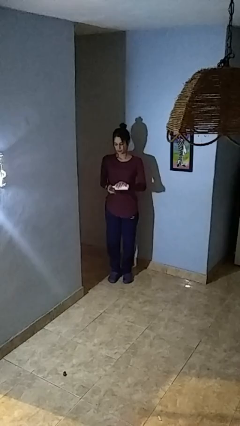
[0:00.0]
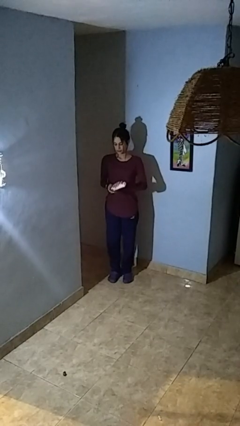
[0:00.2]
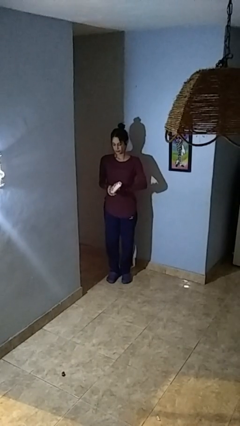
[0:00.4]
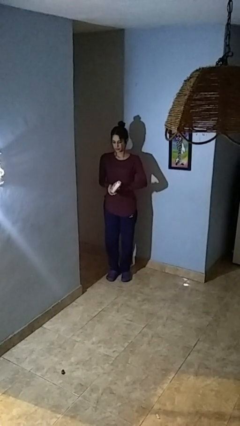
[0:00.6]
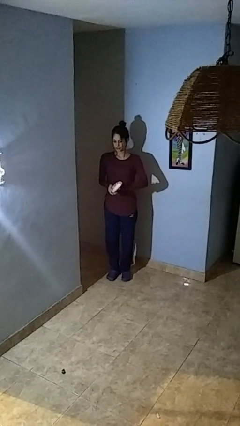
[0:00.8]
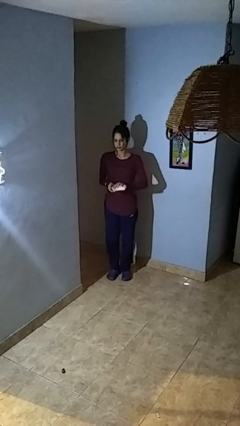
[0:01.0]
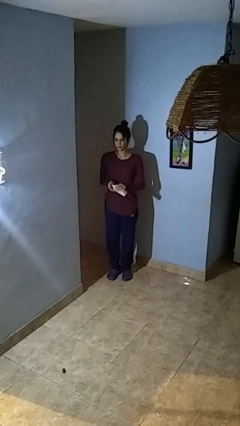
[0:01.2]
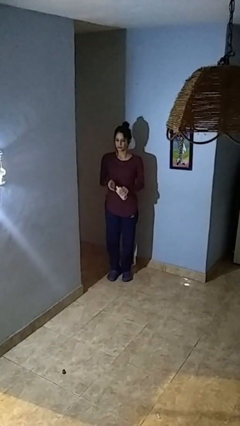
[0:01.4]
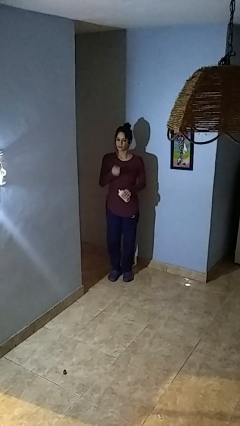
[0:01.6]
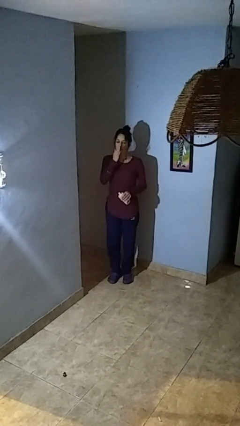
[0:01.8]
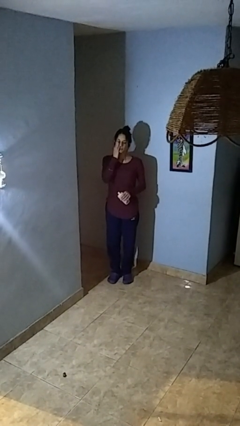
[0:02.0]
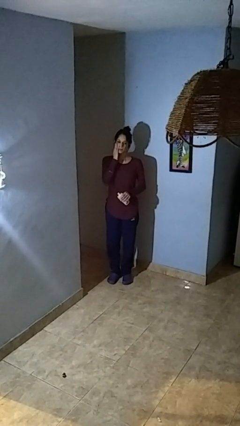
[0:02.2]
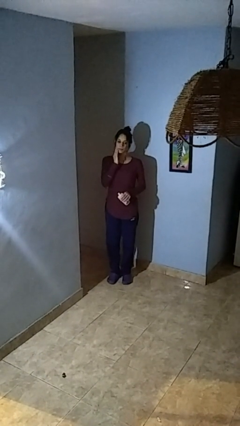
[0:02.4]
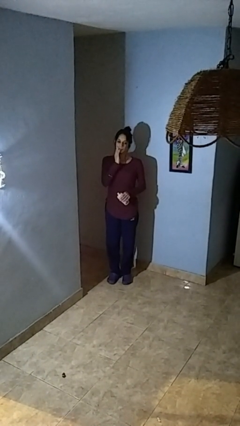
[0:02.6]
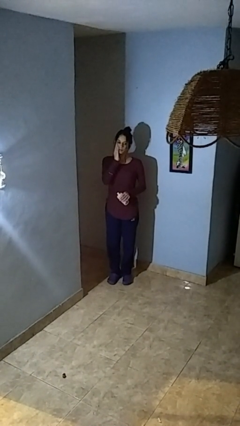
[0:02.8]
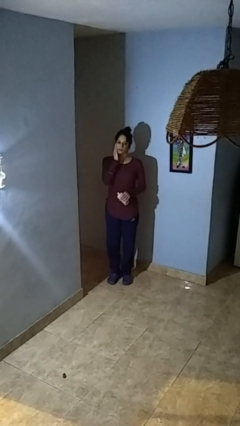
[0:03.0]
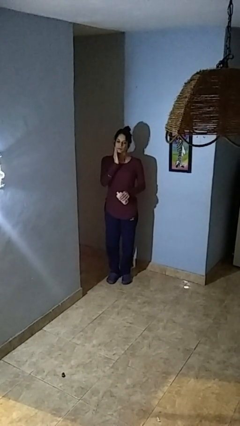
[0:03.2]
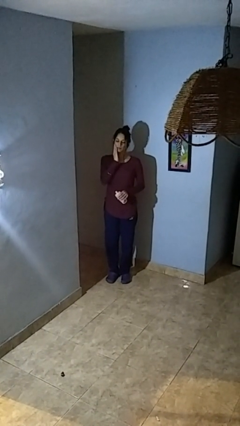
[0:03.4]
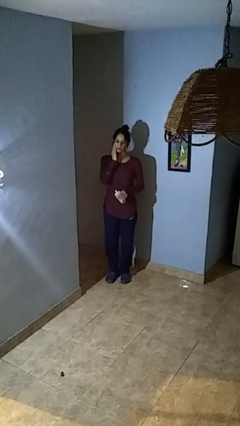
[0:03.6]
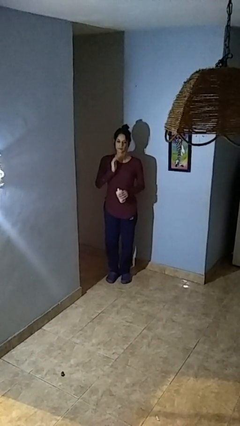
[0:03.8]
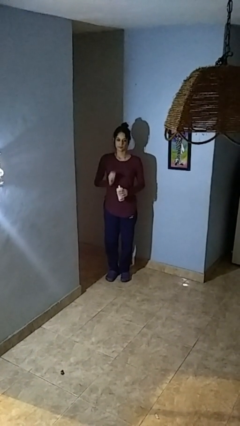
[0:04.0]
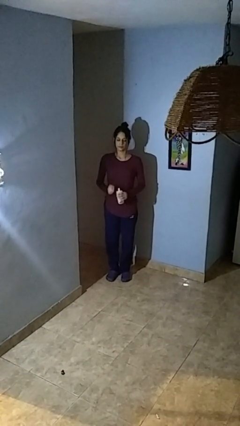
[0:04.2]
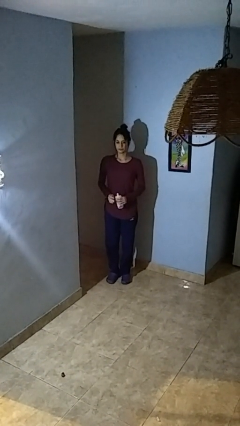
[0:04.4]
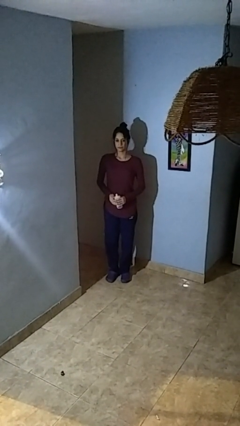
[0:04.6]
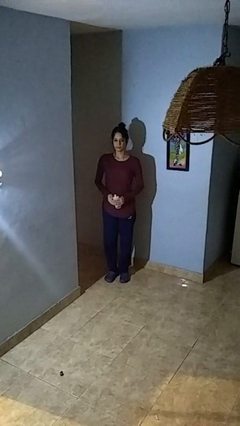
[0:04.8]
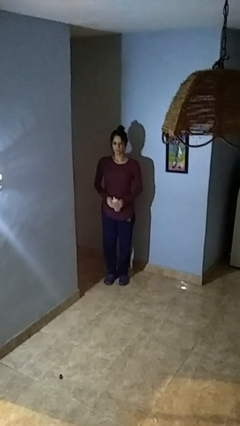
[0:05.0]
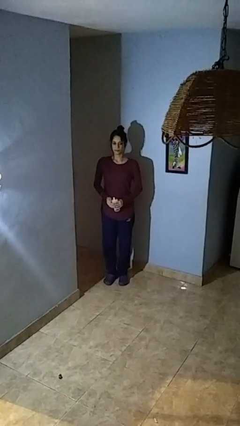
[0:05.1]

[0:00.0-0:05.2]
person applies facial moisturizer

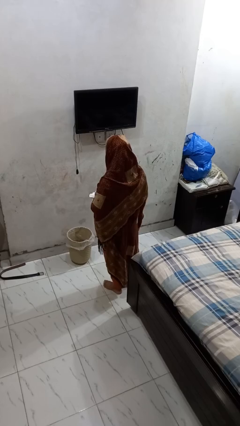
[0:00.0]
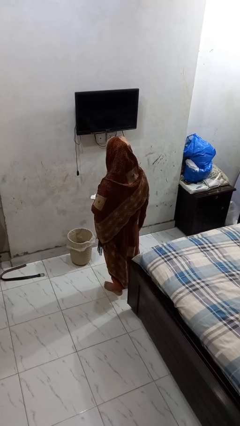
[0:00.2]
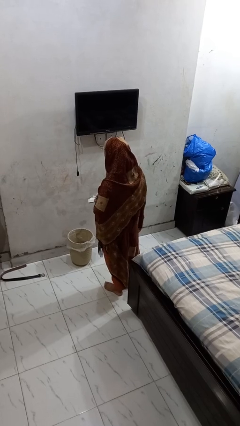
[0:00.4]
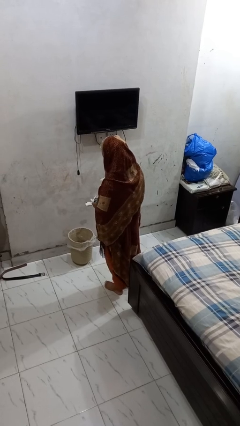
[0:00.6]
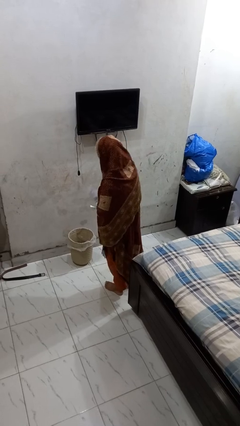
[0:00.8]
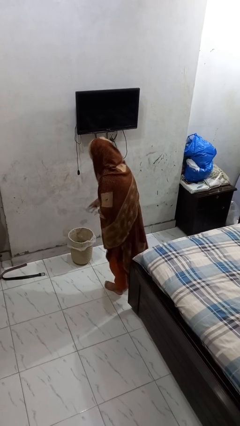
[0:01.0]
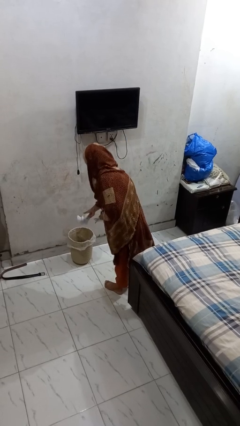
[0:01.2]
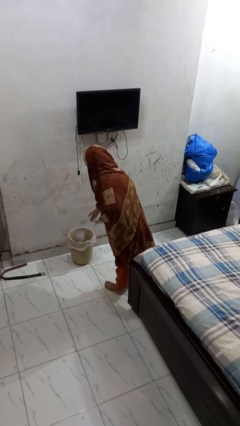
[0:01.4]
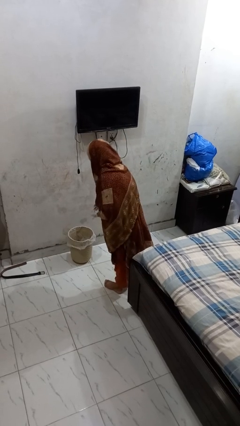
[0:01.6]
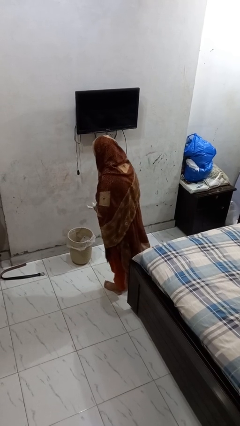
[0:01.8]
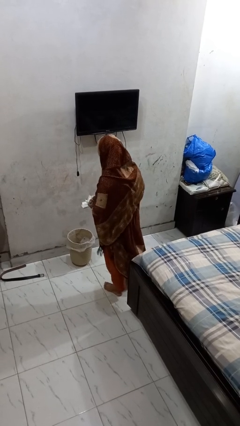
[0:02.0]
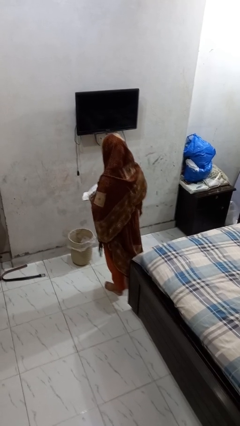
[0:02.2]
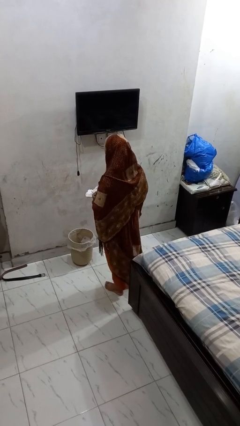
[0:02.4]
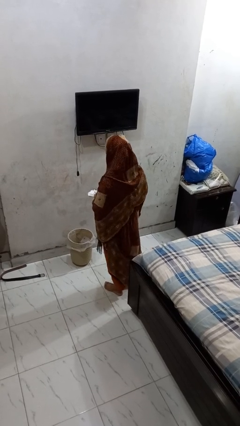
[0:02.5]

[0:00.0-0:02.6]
person discards trash

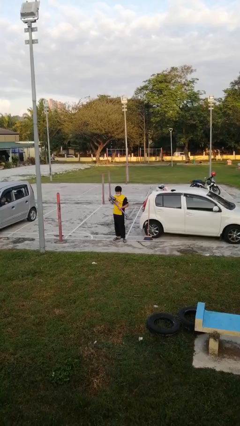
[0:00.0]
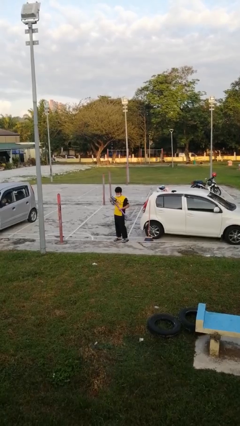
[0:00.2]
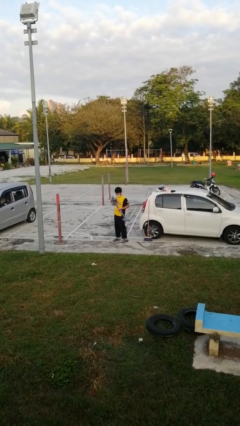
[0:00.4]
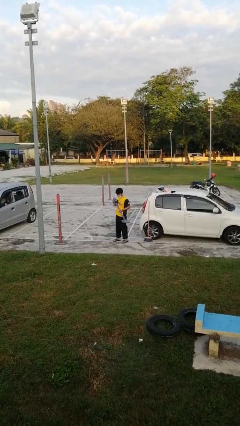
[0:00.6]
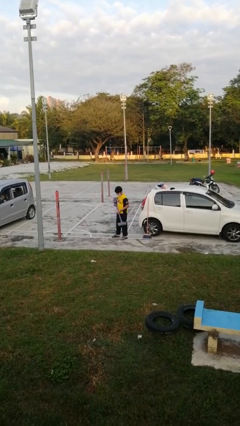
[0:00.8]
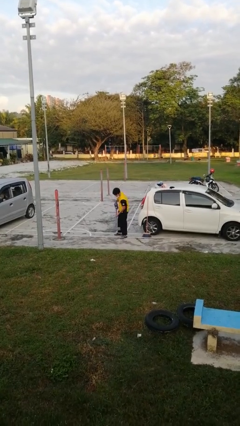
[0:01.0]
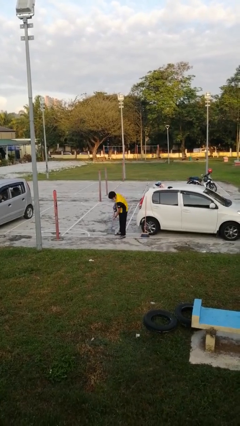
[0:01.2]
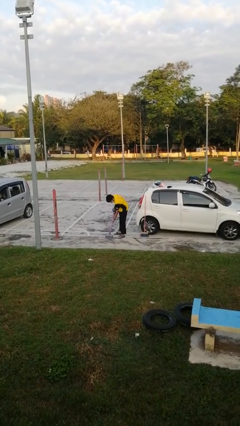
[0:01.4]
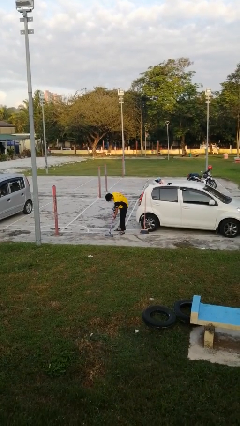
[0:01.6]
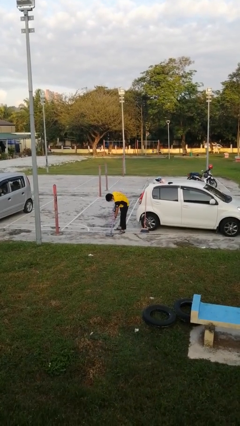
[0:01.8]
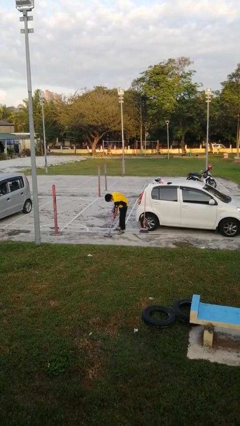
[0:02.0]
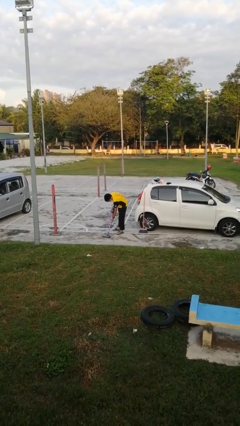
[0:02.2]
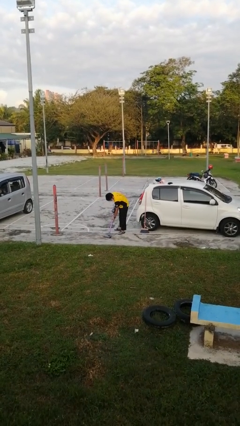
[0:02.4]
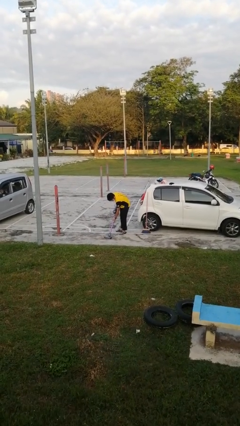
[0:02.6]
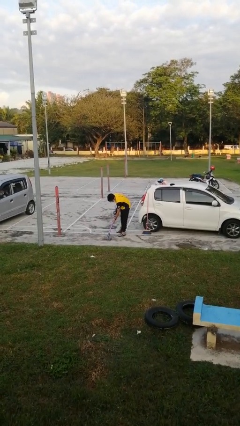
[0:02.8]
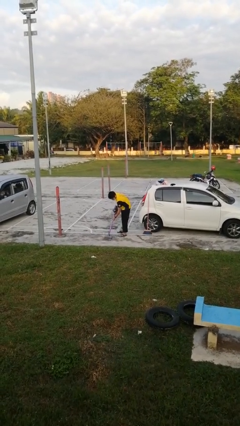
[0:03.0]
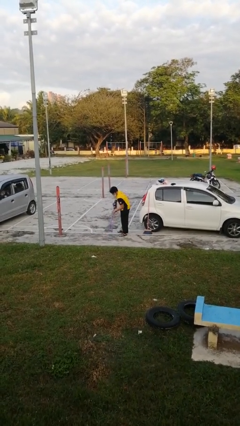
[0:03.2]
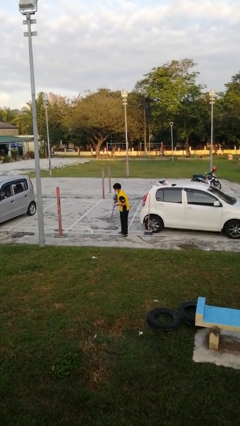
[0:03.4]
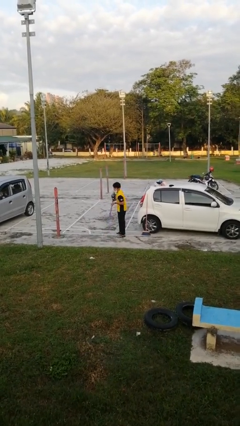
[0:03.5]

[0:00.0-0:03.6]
person vacuums carpet

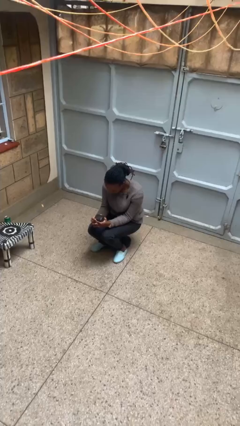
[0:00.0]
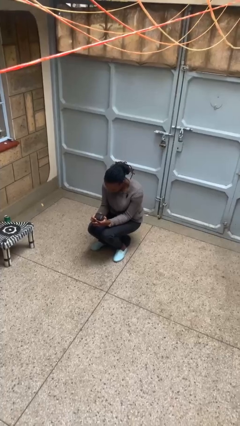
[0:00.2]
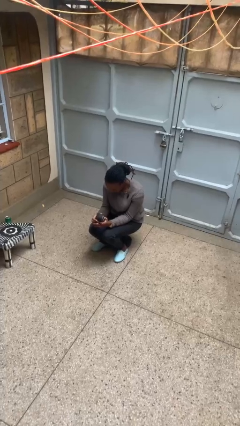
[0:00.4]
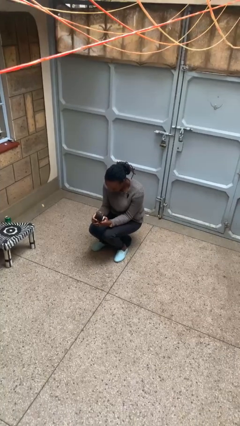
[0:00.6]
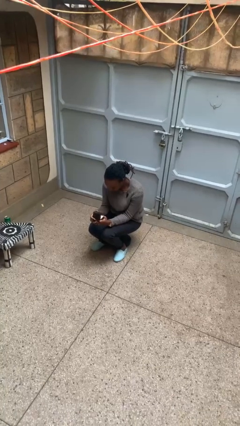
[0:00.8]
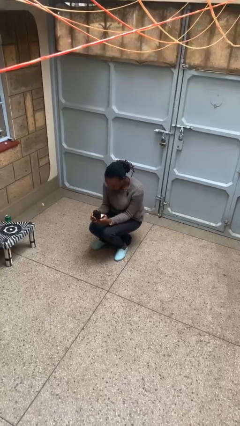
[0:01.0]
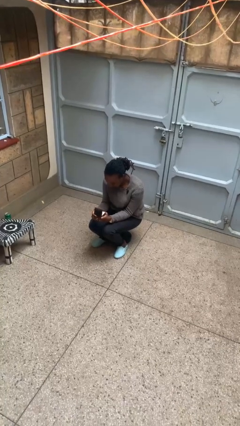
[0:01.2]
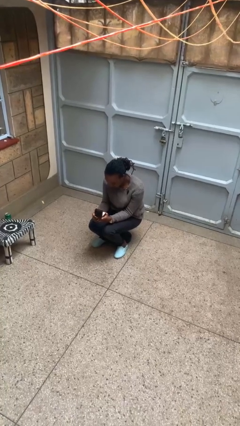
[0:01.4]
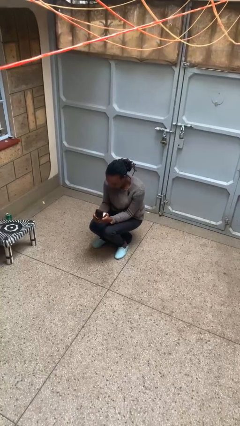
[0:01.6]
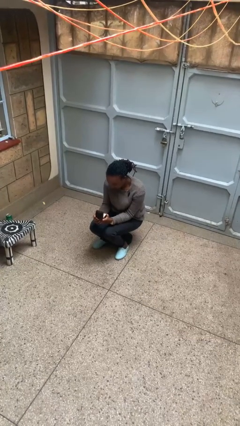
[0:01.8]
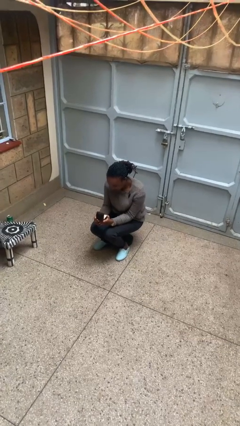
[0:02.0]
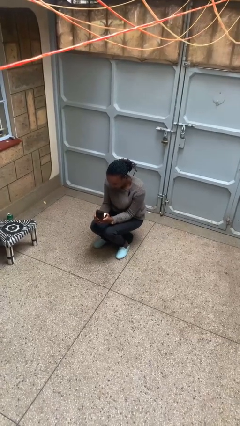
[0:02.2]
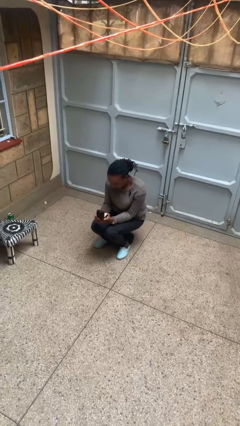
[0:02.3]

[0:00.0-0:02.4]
person opens jewelry box

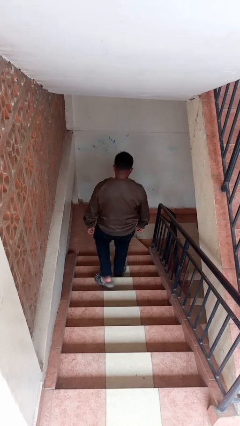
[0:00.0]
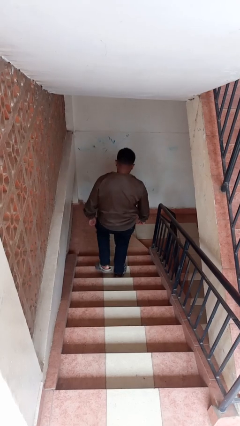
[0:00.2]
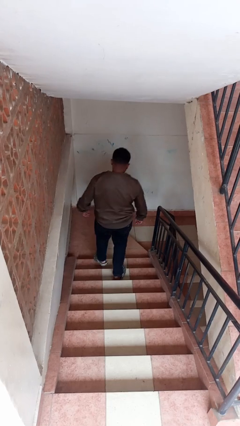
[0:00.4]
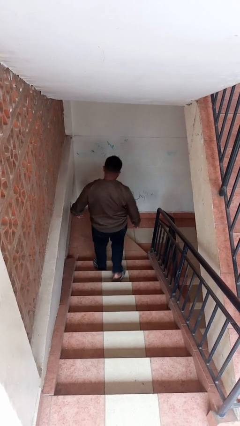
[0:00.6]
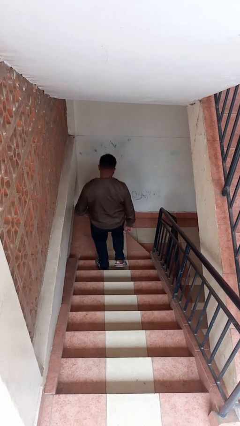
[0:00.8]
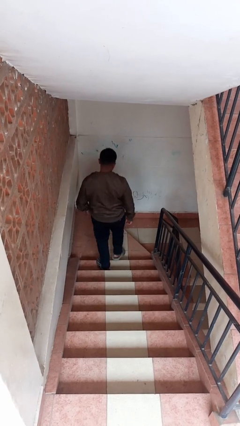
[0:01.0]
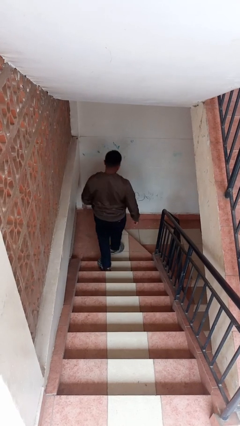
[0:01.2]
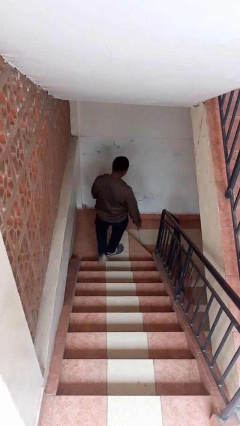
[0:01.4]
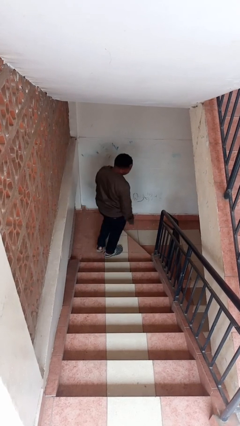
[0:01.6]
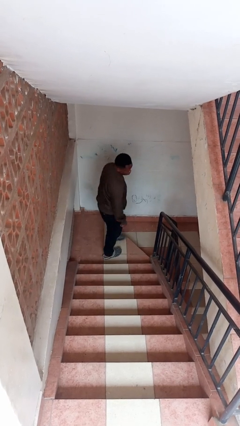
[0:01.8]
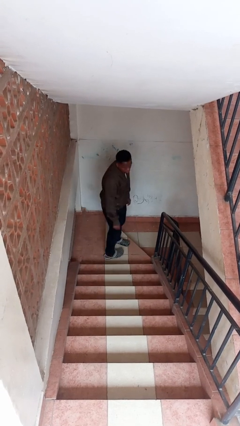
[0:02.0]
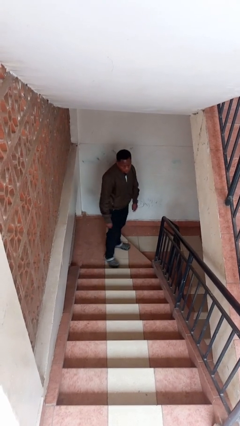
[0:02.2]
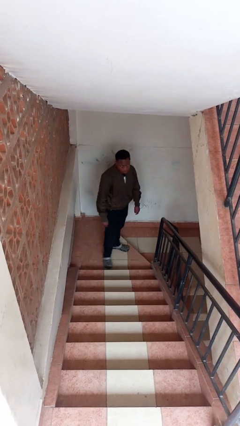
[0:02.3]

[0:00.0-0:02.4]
person climbs down stairs

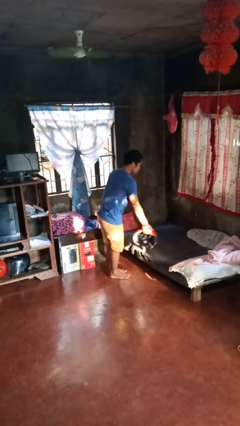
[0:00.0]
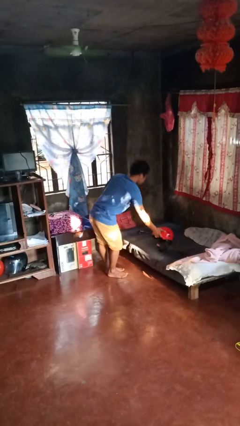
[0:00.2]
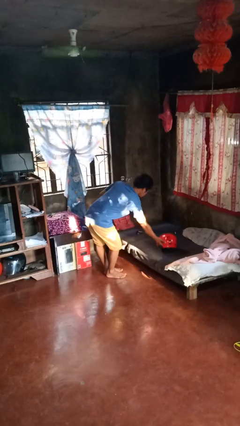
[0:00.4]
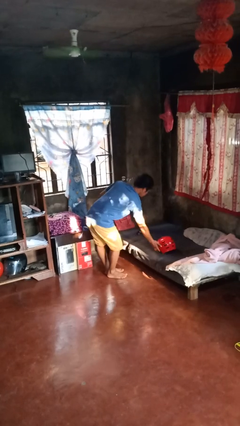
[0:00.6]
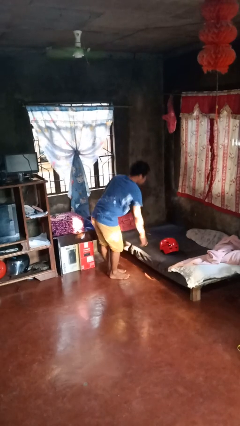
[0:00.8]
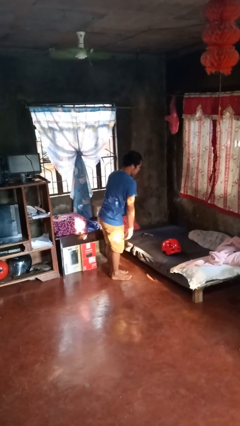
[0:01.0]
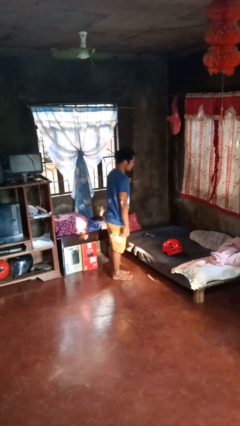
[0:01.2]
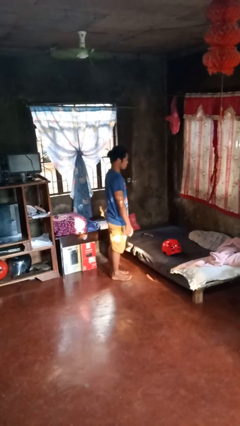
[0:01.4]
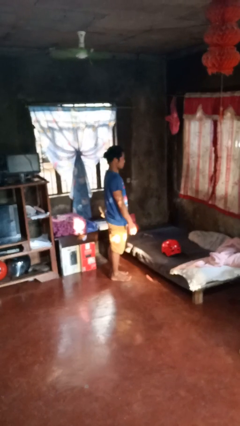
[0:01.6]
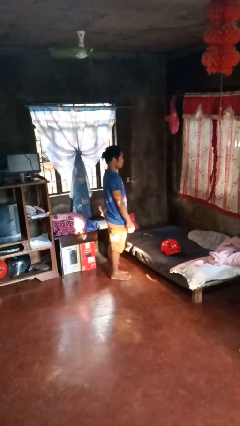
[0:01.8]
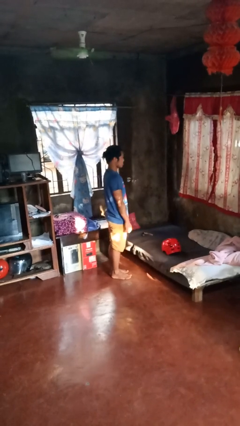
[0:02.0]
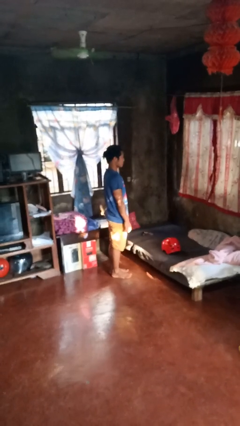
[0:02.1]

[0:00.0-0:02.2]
person puts down object on bed
